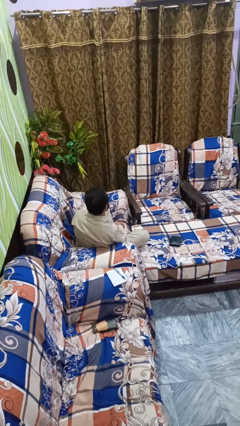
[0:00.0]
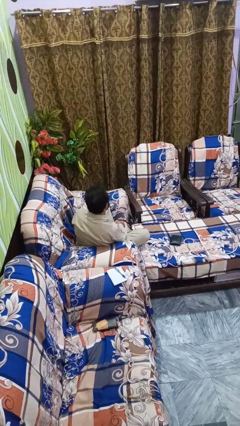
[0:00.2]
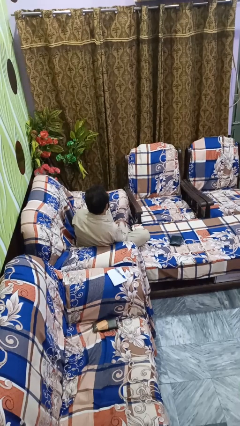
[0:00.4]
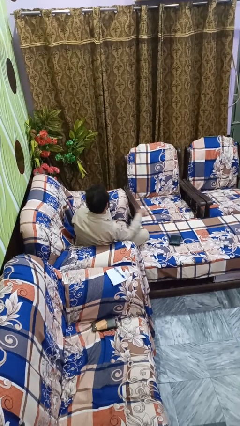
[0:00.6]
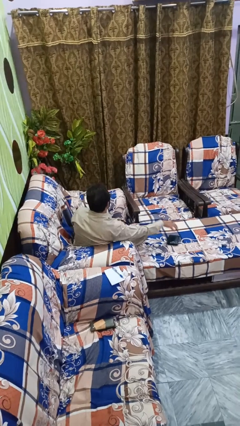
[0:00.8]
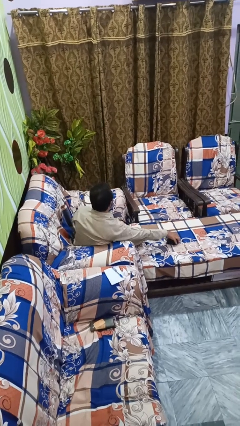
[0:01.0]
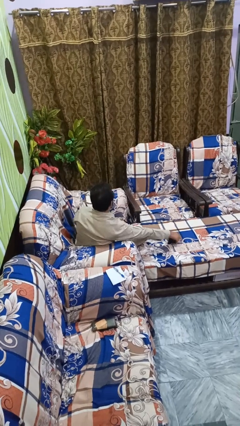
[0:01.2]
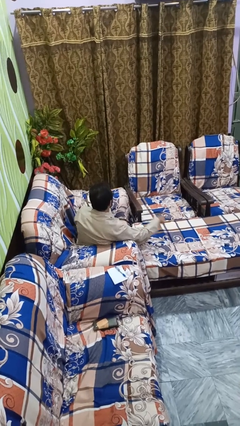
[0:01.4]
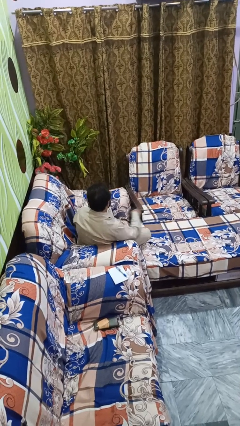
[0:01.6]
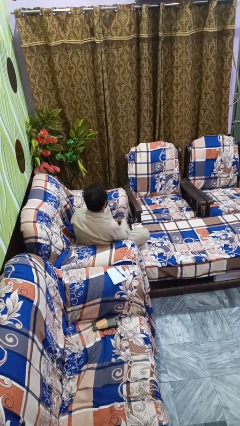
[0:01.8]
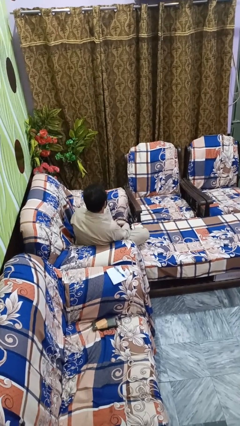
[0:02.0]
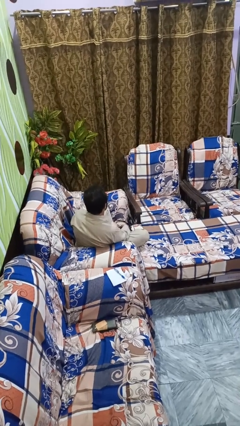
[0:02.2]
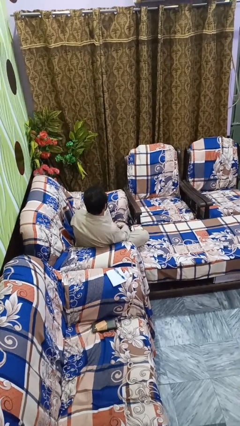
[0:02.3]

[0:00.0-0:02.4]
person picks up object from floor

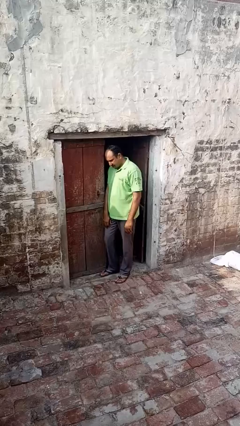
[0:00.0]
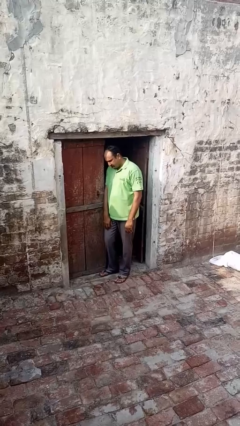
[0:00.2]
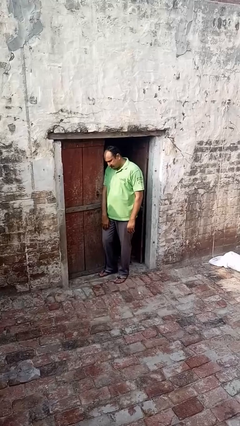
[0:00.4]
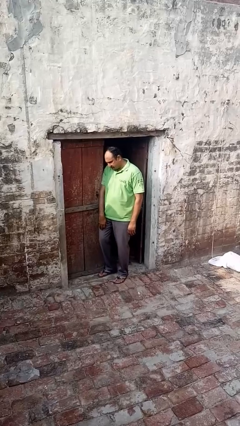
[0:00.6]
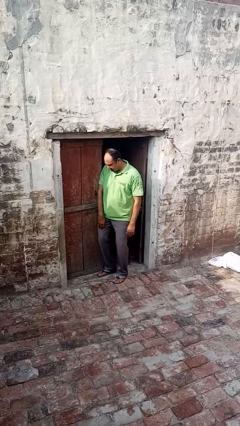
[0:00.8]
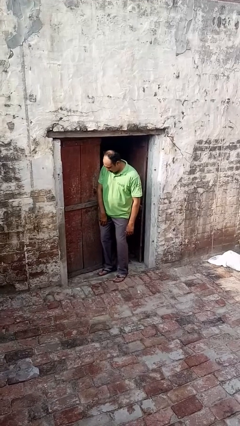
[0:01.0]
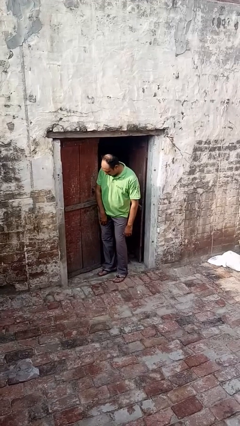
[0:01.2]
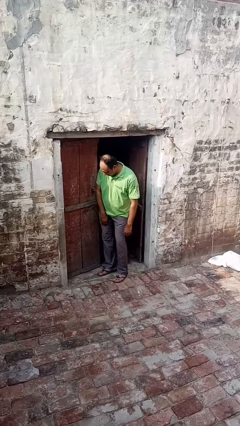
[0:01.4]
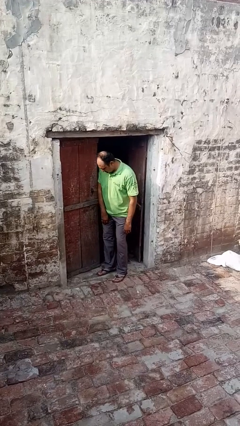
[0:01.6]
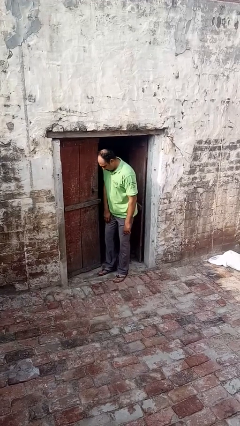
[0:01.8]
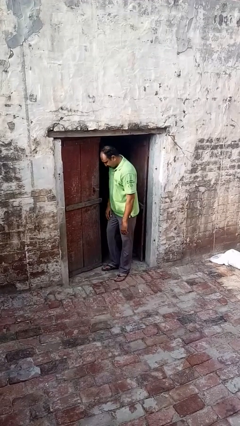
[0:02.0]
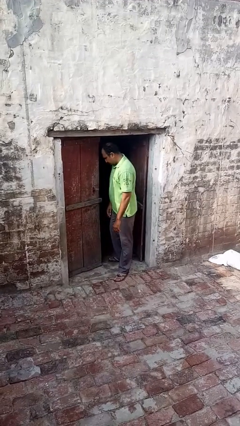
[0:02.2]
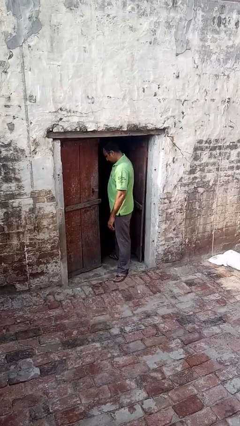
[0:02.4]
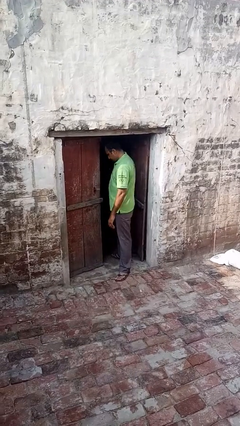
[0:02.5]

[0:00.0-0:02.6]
person opens facility door

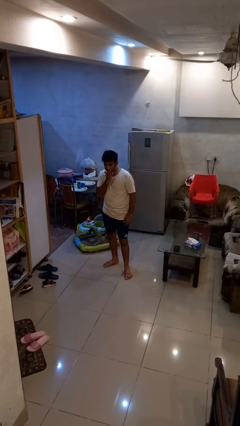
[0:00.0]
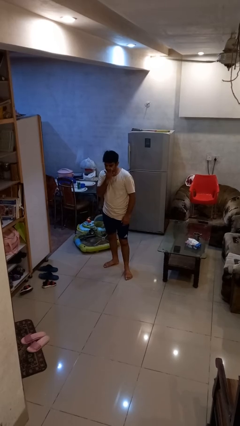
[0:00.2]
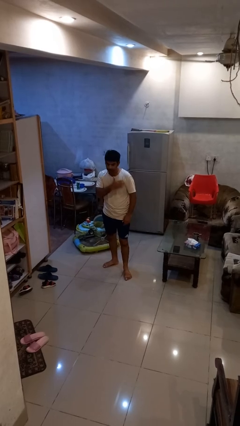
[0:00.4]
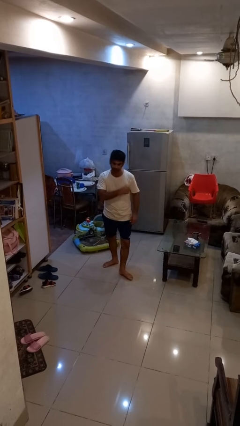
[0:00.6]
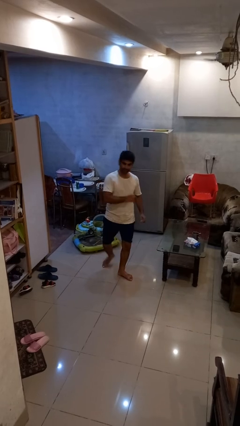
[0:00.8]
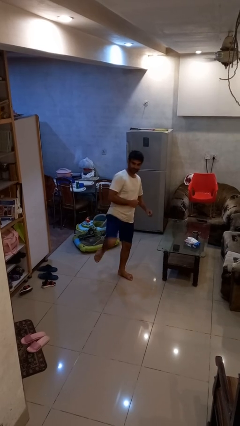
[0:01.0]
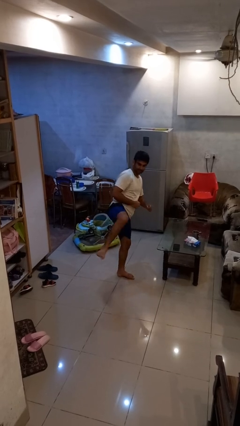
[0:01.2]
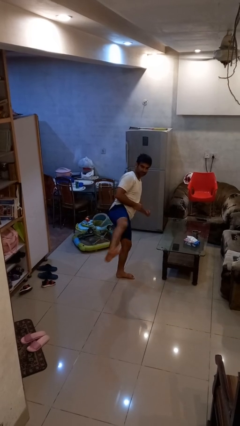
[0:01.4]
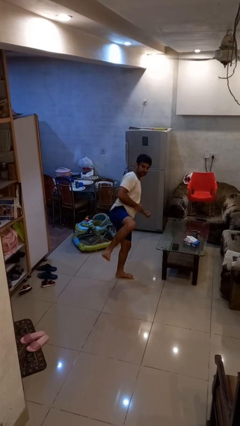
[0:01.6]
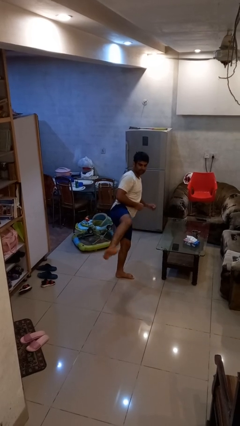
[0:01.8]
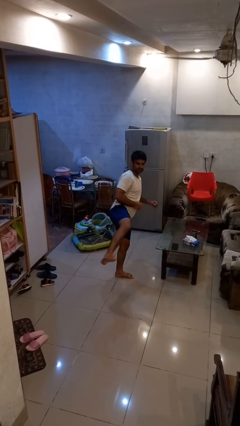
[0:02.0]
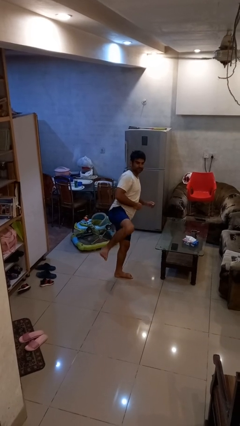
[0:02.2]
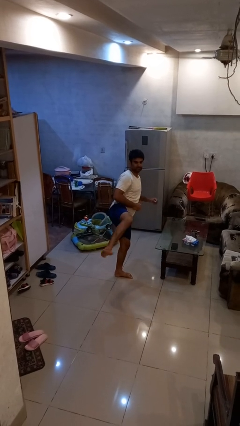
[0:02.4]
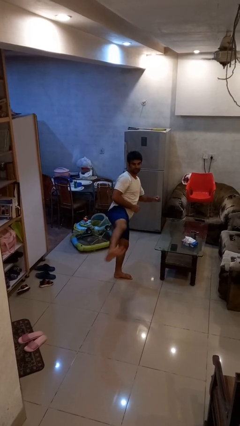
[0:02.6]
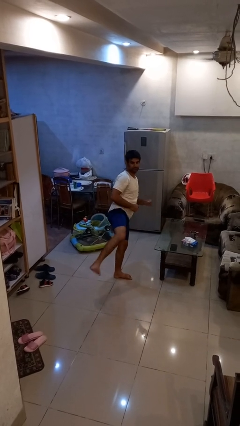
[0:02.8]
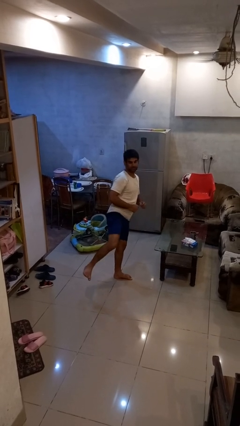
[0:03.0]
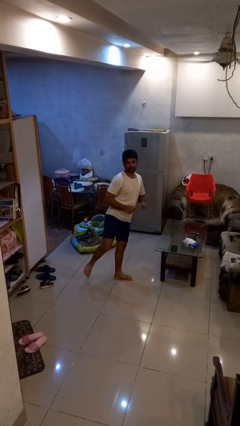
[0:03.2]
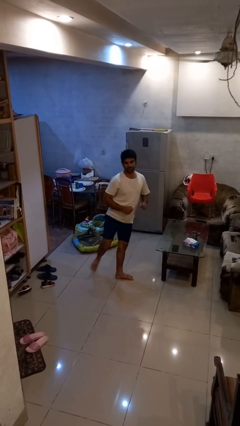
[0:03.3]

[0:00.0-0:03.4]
person karate kicks

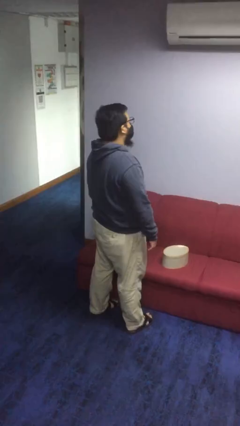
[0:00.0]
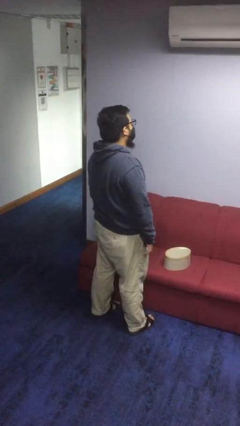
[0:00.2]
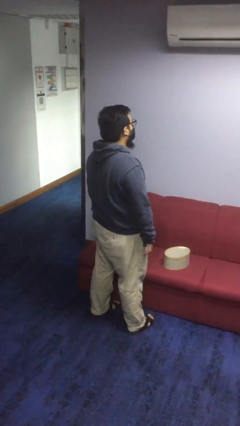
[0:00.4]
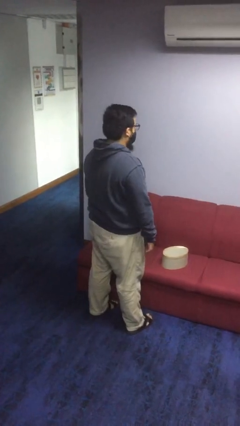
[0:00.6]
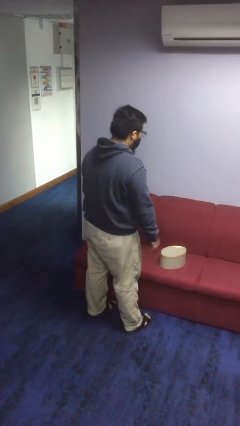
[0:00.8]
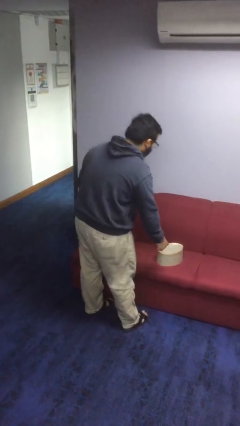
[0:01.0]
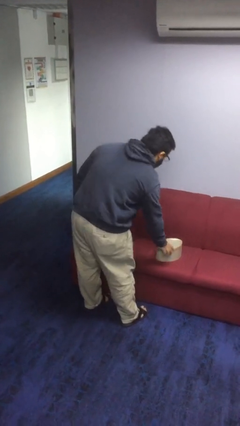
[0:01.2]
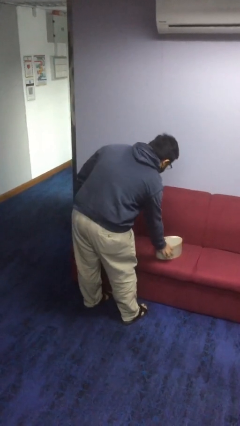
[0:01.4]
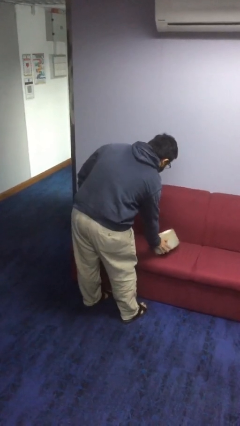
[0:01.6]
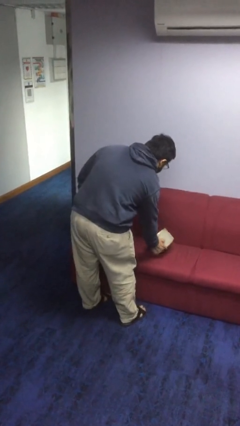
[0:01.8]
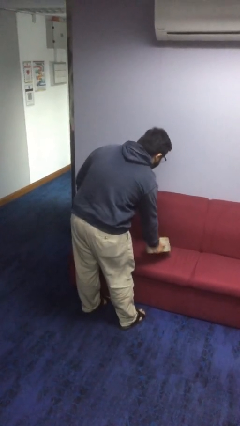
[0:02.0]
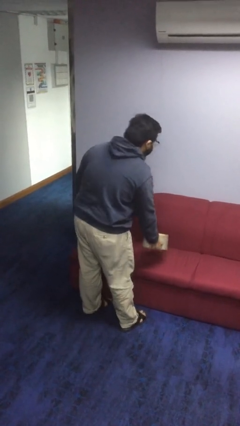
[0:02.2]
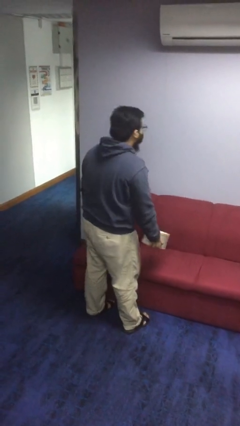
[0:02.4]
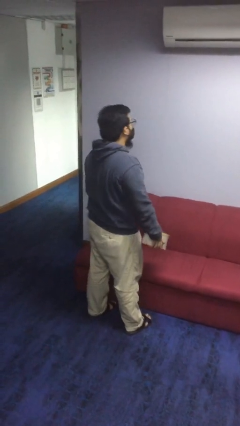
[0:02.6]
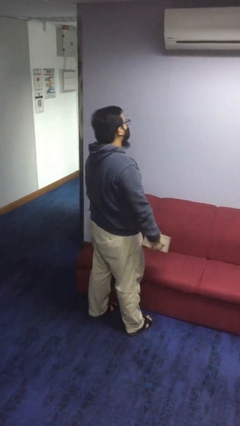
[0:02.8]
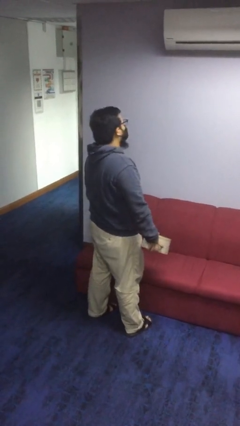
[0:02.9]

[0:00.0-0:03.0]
person picks up object from couch

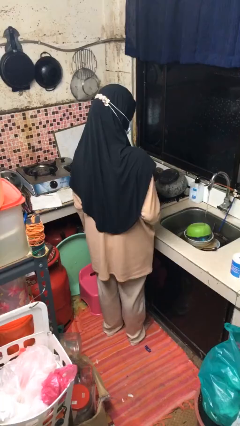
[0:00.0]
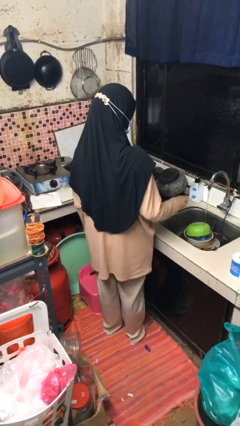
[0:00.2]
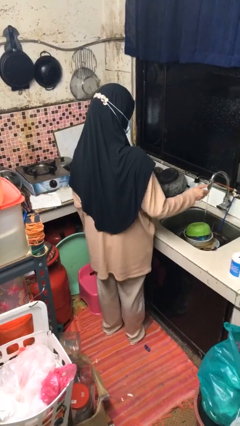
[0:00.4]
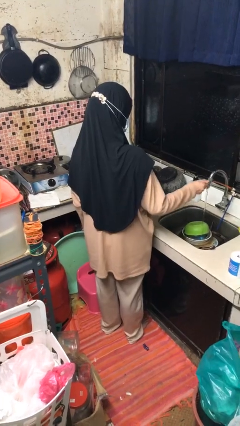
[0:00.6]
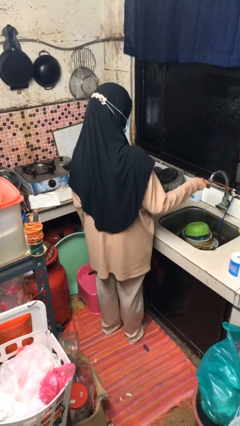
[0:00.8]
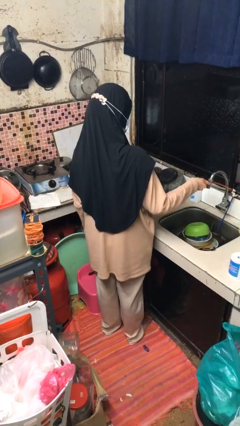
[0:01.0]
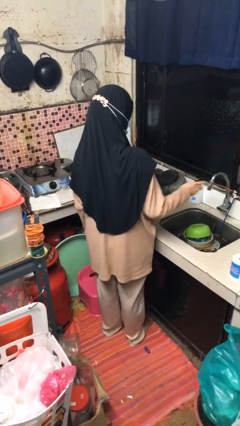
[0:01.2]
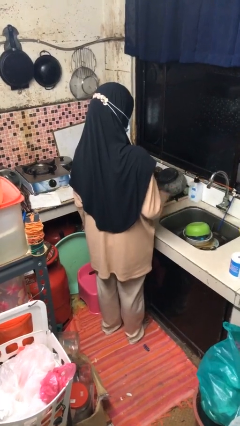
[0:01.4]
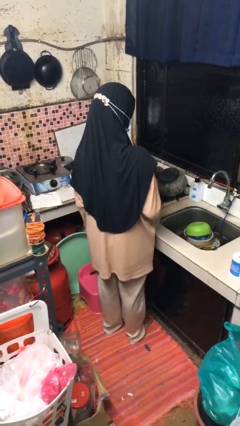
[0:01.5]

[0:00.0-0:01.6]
person turns off faucet

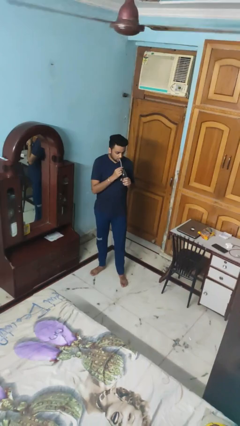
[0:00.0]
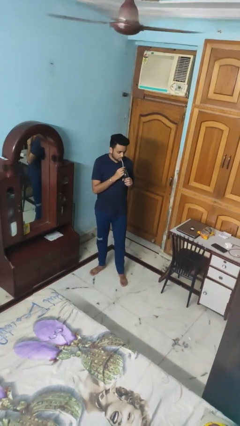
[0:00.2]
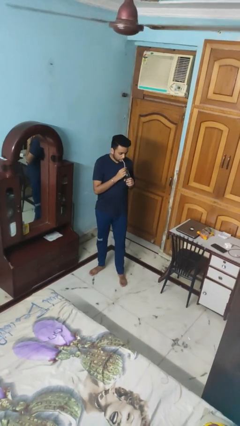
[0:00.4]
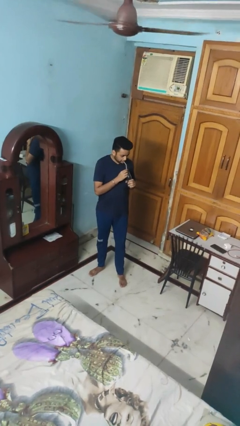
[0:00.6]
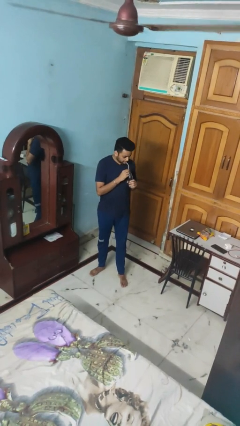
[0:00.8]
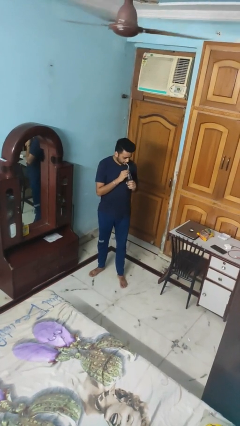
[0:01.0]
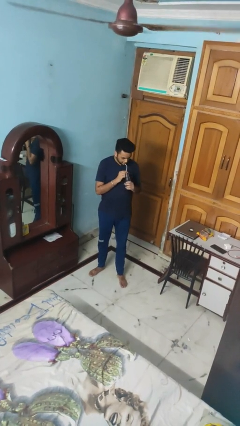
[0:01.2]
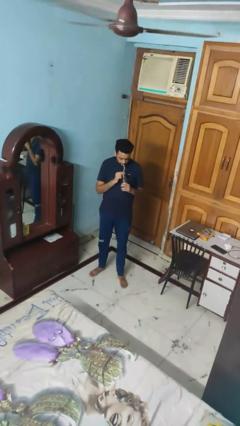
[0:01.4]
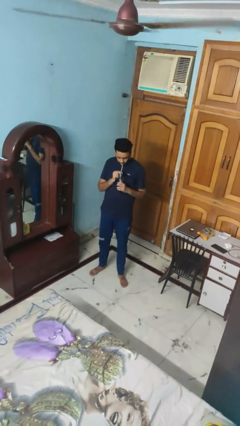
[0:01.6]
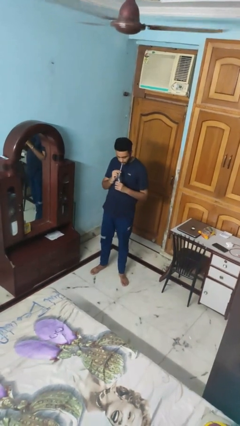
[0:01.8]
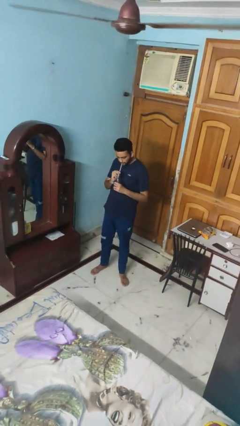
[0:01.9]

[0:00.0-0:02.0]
person drinks from straw

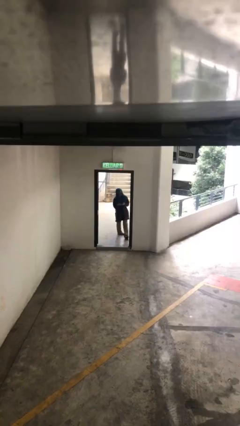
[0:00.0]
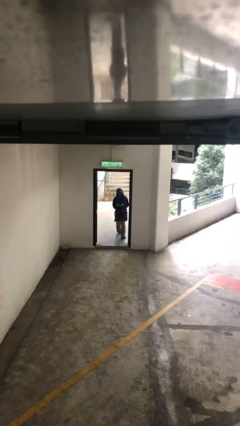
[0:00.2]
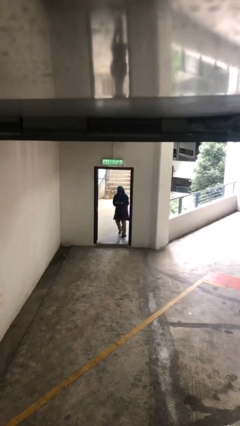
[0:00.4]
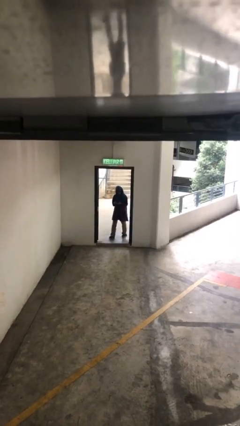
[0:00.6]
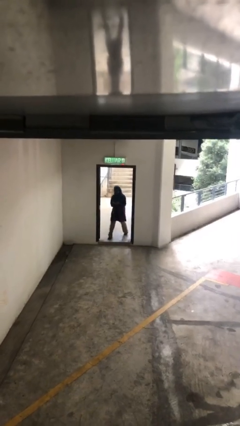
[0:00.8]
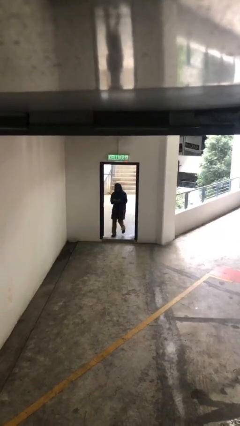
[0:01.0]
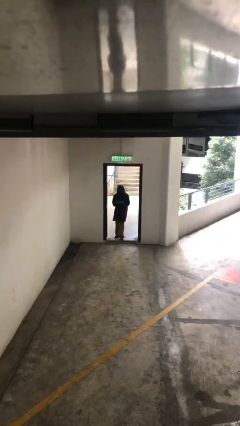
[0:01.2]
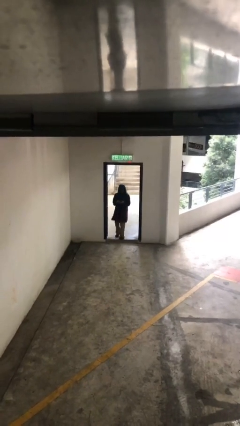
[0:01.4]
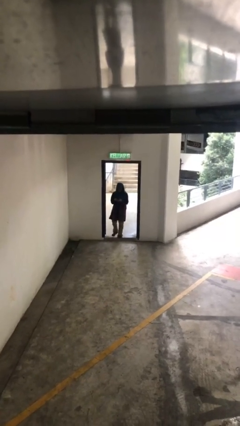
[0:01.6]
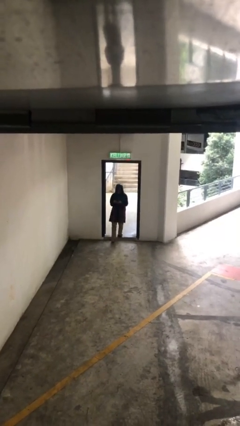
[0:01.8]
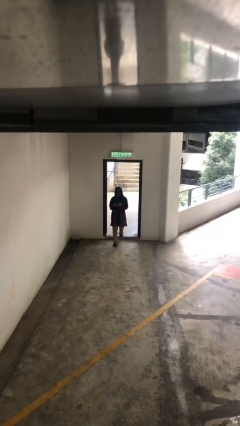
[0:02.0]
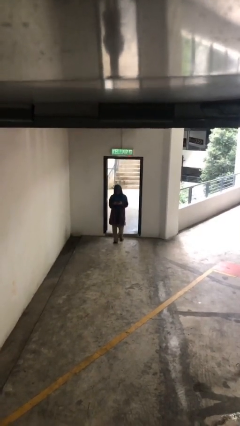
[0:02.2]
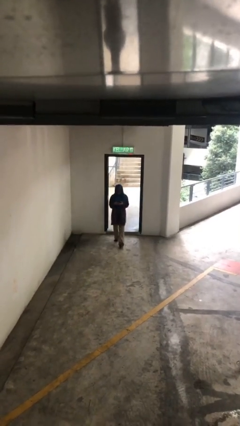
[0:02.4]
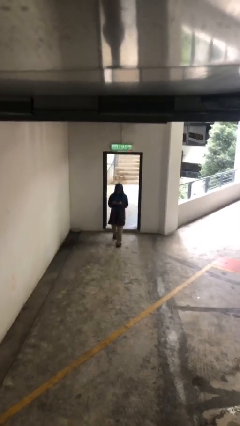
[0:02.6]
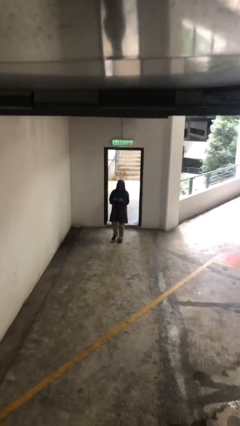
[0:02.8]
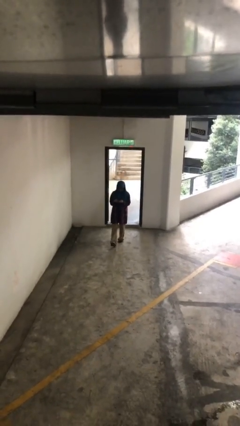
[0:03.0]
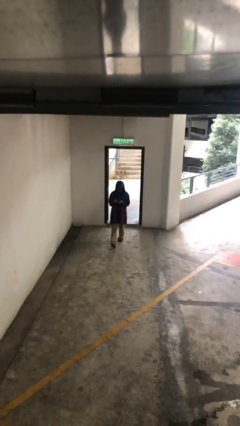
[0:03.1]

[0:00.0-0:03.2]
person enters scene through structure
